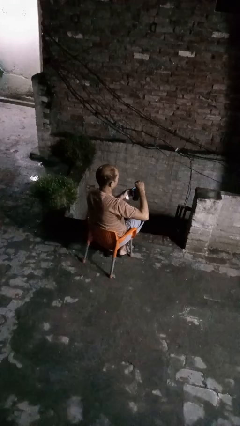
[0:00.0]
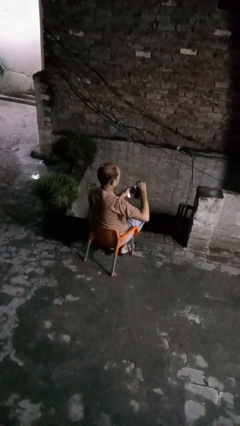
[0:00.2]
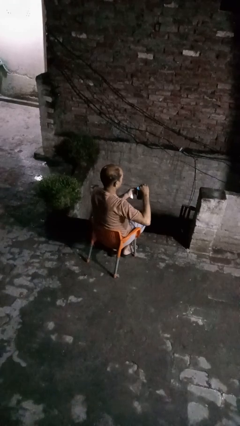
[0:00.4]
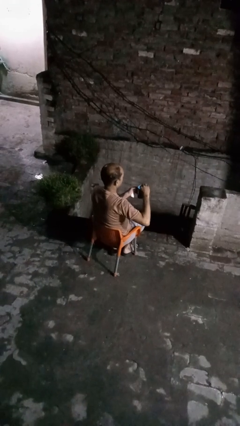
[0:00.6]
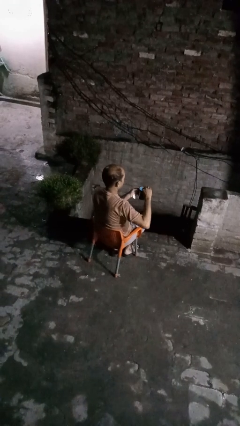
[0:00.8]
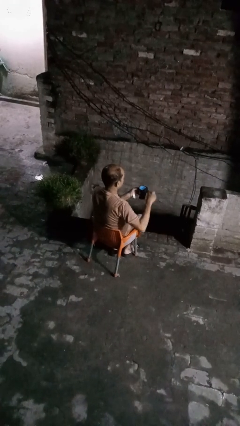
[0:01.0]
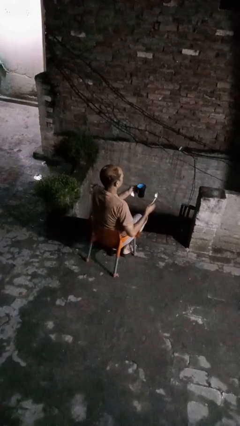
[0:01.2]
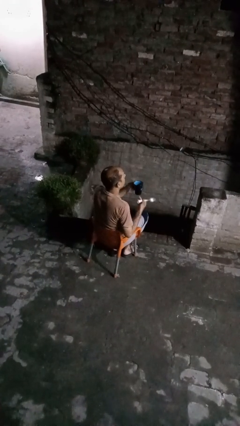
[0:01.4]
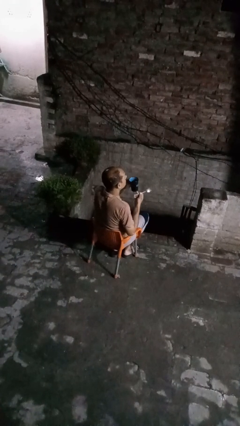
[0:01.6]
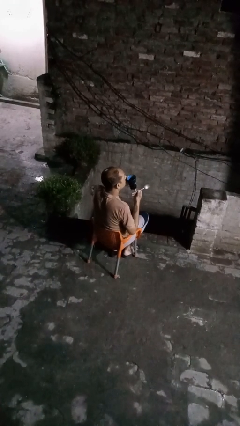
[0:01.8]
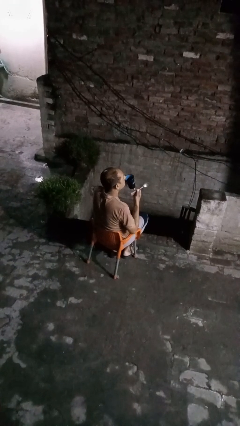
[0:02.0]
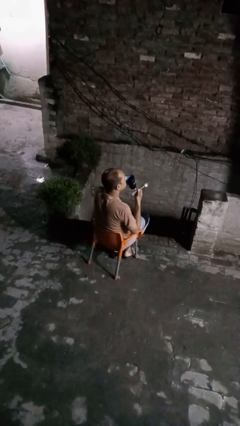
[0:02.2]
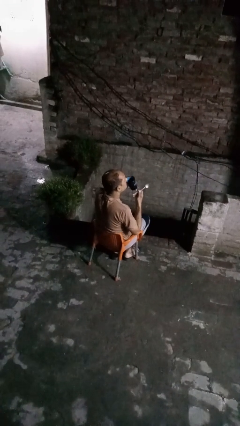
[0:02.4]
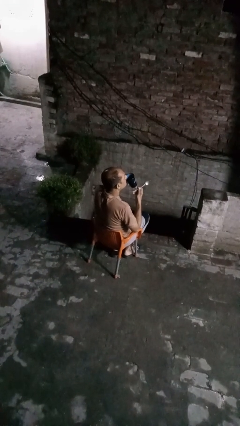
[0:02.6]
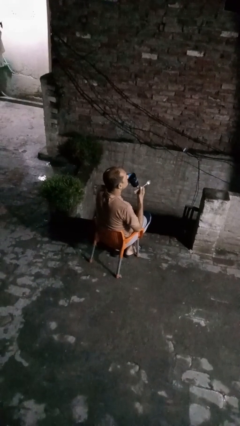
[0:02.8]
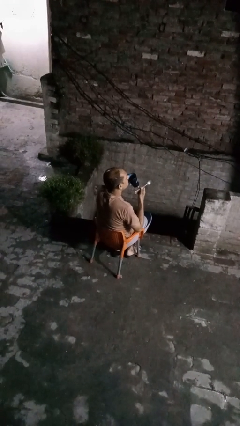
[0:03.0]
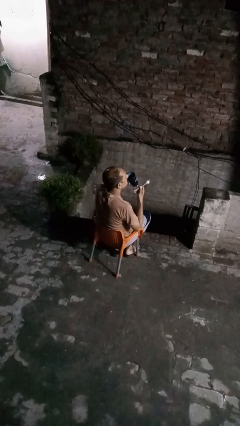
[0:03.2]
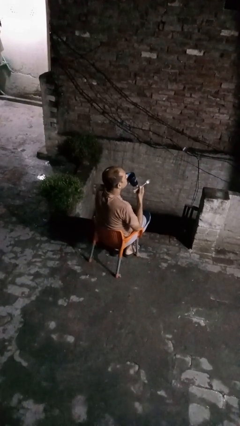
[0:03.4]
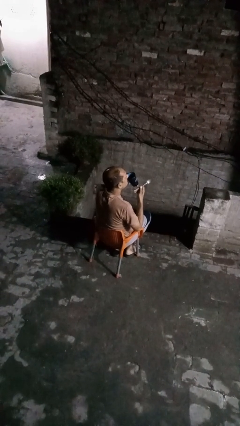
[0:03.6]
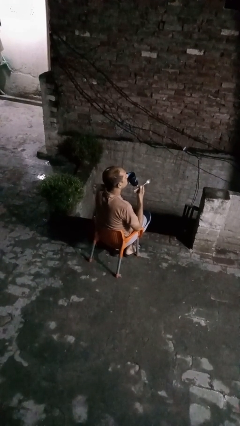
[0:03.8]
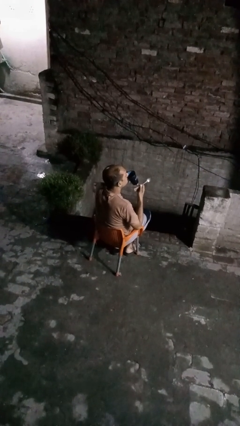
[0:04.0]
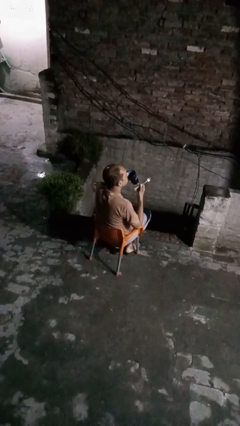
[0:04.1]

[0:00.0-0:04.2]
person drinks from mug

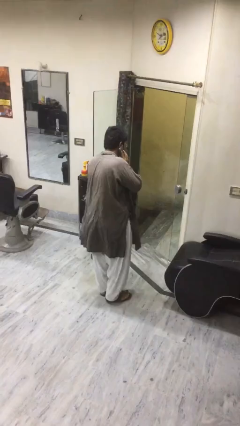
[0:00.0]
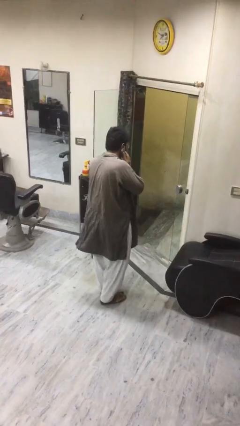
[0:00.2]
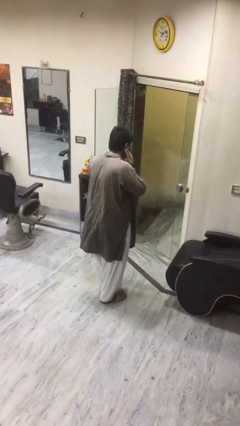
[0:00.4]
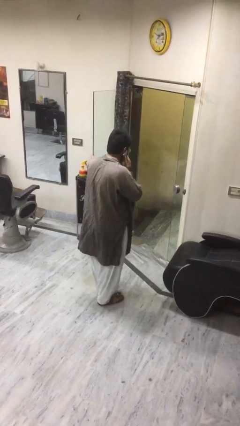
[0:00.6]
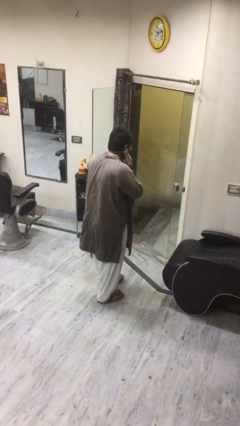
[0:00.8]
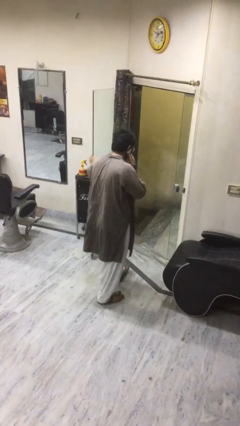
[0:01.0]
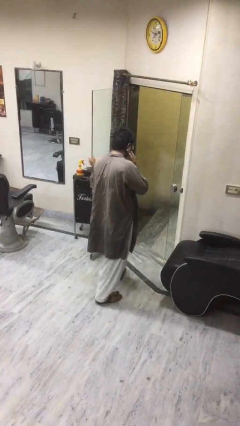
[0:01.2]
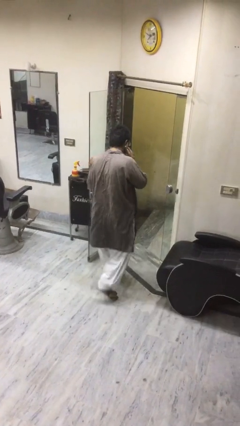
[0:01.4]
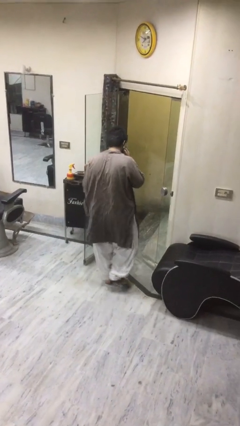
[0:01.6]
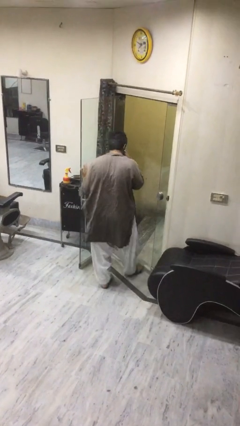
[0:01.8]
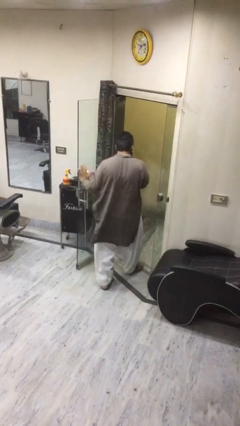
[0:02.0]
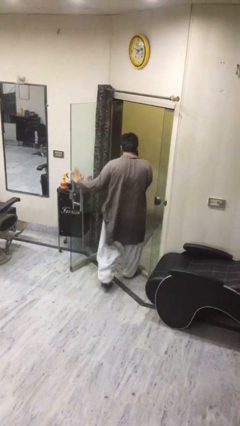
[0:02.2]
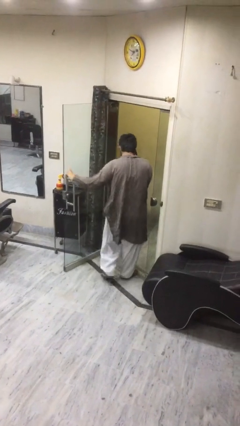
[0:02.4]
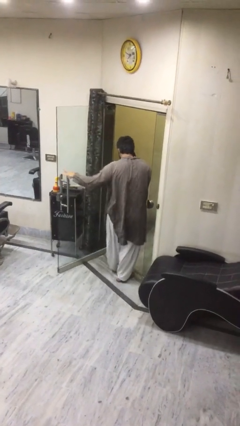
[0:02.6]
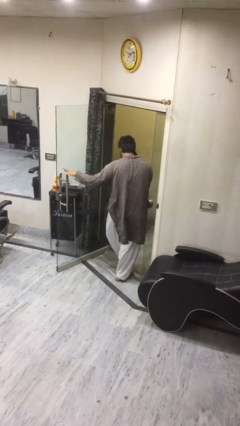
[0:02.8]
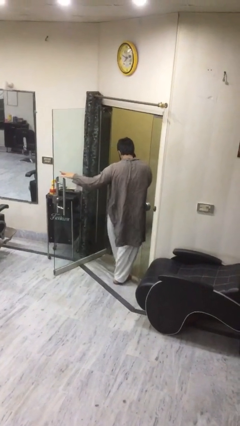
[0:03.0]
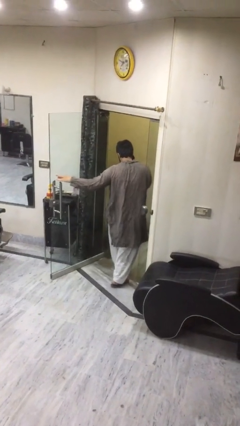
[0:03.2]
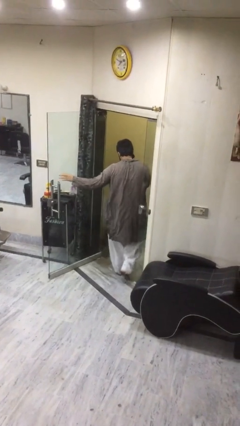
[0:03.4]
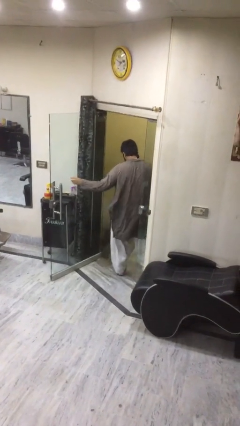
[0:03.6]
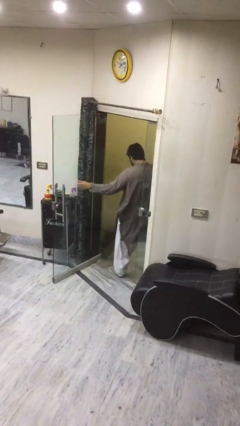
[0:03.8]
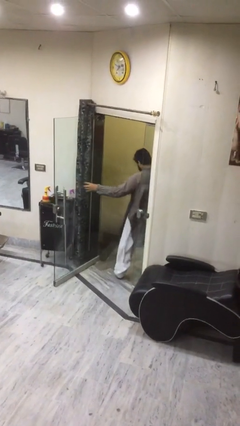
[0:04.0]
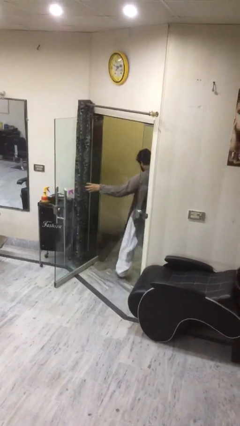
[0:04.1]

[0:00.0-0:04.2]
person exits scene through structure

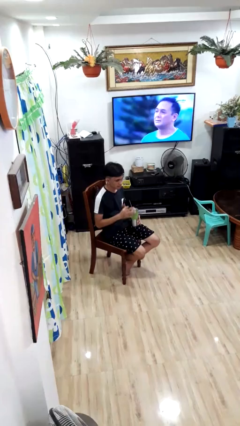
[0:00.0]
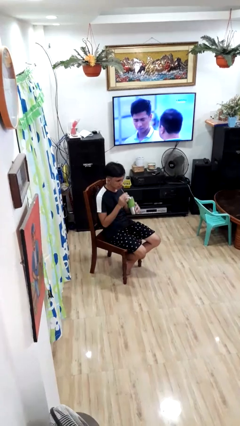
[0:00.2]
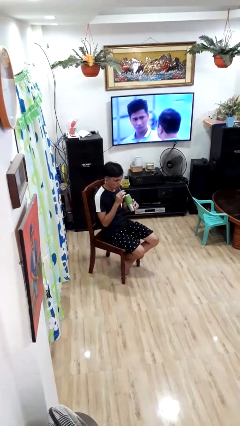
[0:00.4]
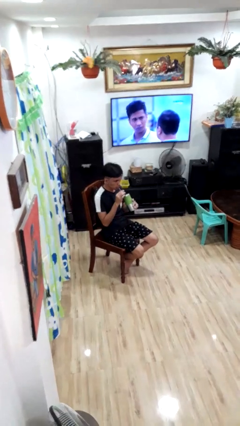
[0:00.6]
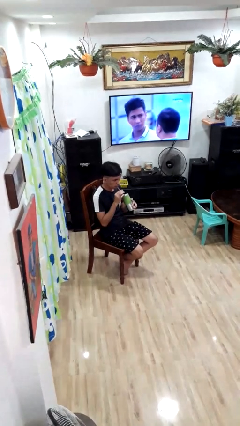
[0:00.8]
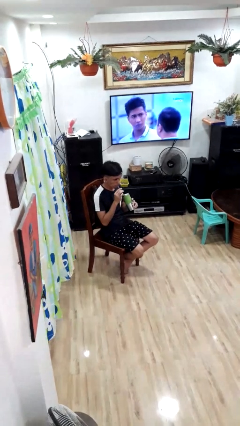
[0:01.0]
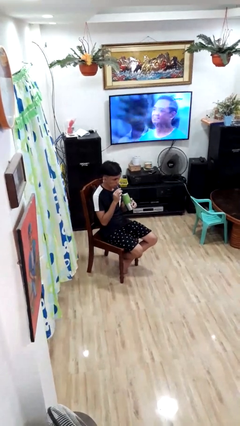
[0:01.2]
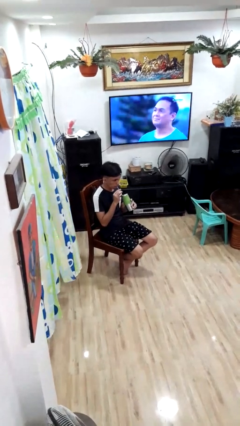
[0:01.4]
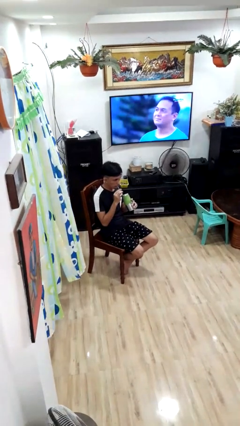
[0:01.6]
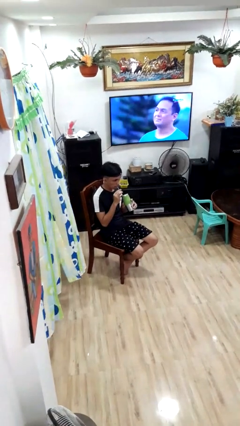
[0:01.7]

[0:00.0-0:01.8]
person wipes mouth with napkin

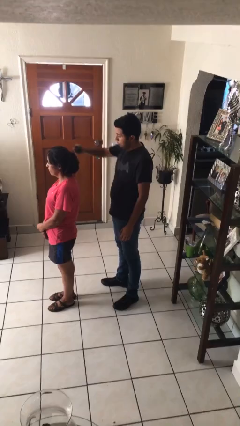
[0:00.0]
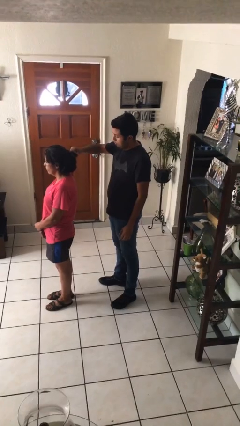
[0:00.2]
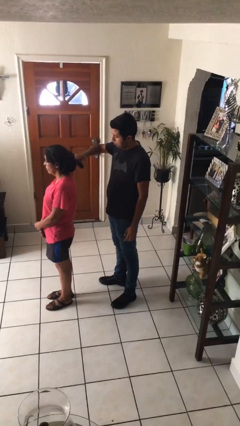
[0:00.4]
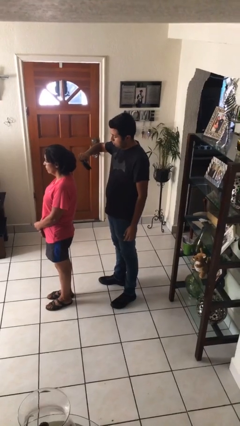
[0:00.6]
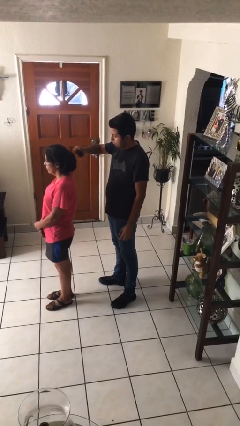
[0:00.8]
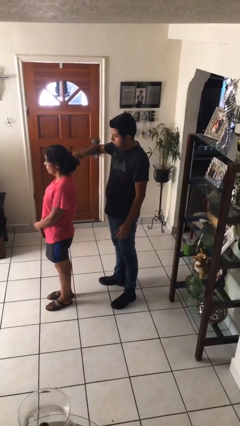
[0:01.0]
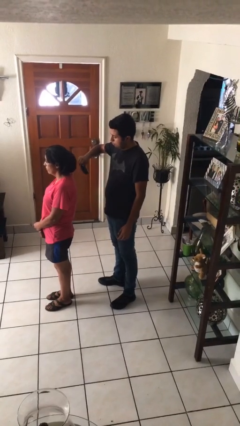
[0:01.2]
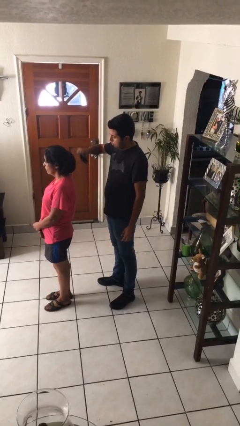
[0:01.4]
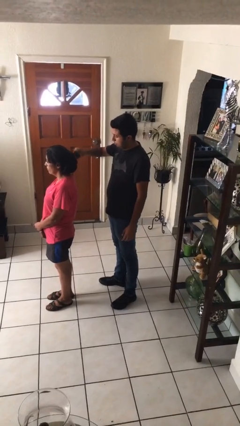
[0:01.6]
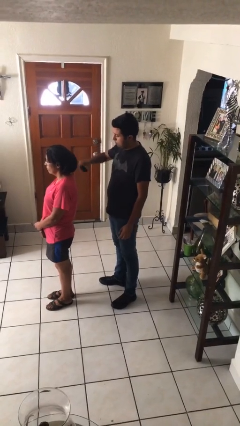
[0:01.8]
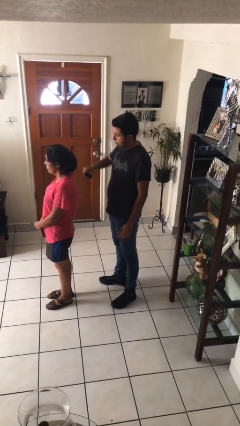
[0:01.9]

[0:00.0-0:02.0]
person brushes hair of person

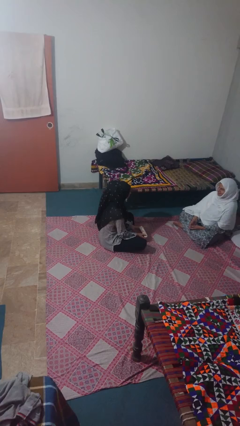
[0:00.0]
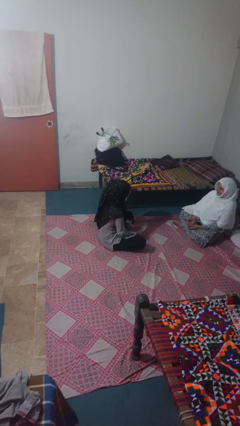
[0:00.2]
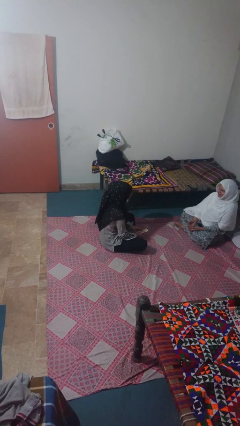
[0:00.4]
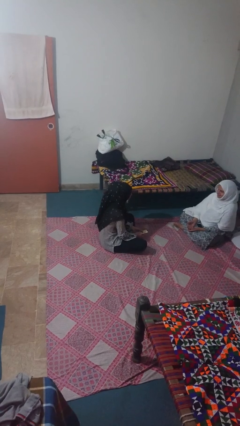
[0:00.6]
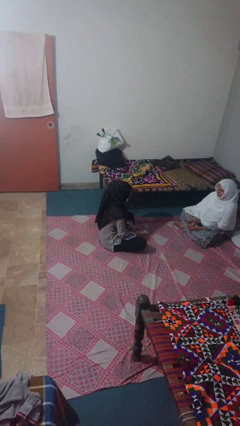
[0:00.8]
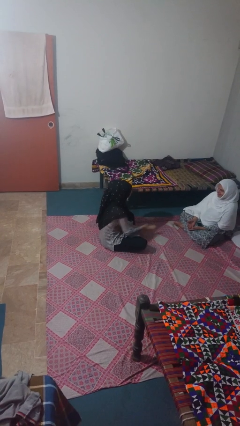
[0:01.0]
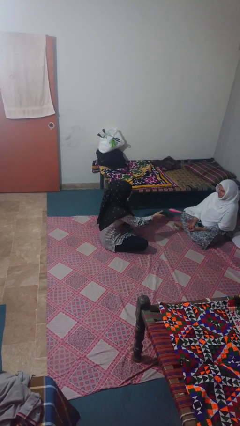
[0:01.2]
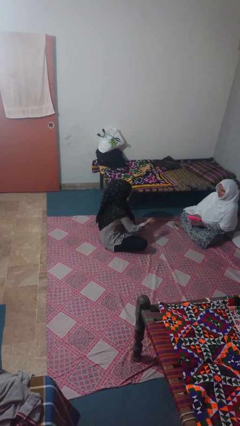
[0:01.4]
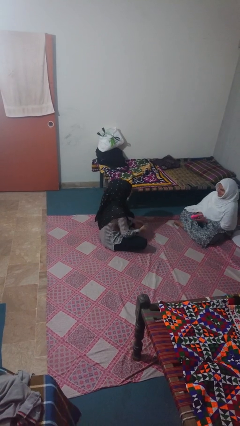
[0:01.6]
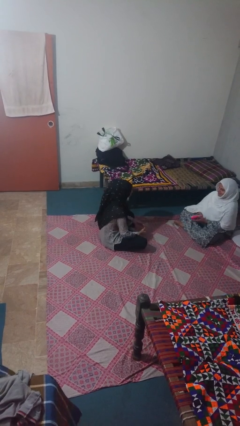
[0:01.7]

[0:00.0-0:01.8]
person throws object to person

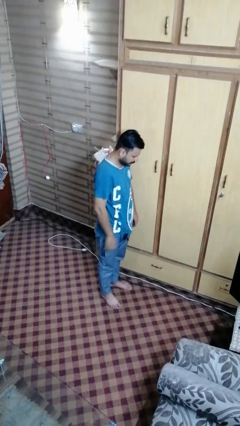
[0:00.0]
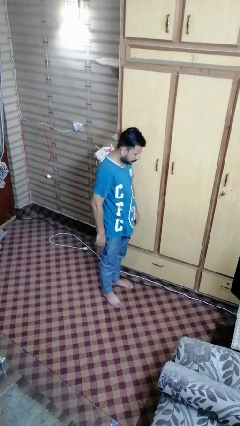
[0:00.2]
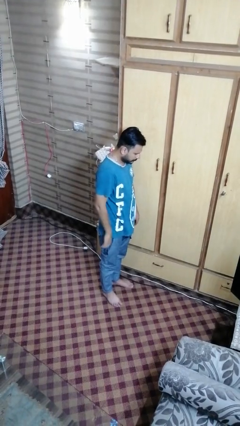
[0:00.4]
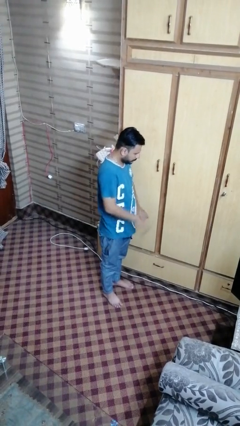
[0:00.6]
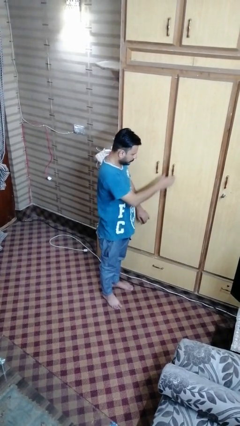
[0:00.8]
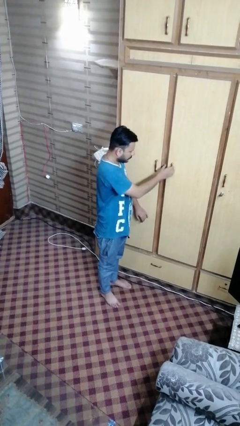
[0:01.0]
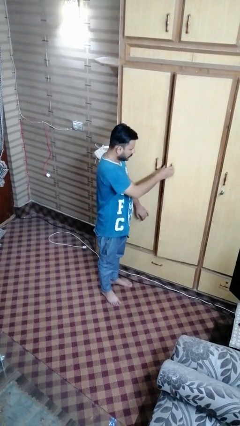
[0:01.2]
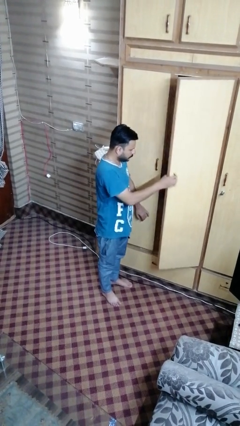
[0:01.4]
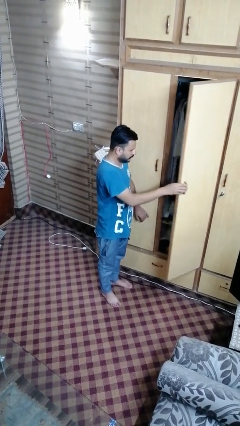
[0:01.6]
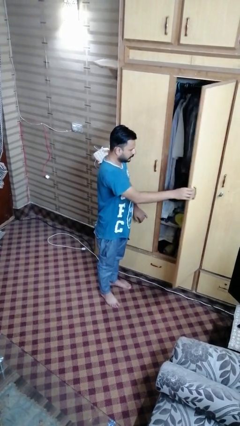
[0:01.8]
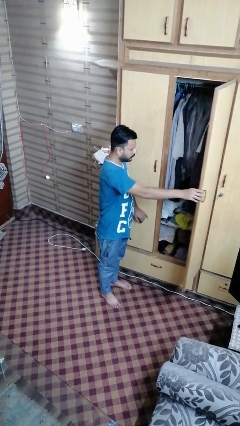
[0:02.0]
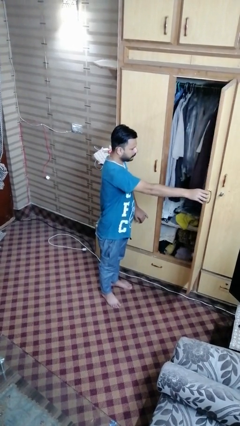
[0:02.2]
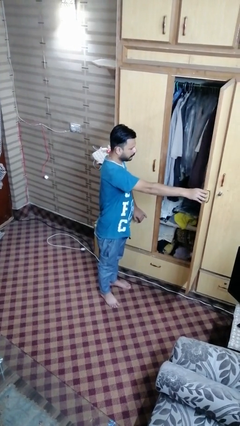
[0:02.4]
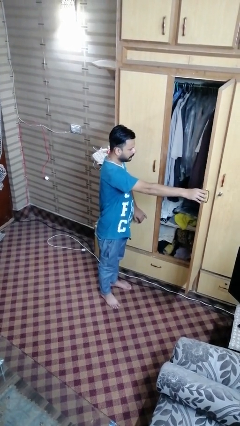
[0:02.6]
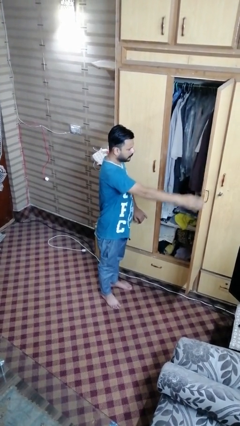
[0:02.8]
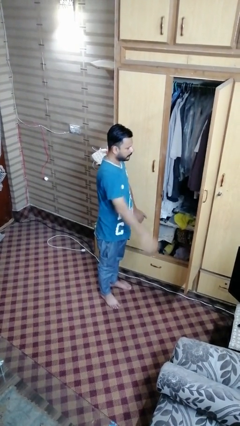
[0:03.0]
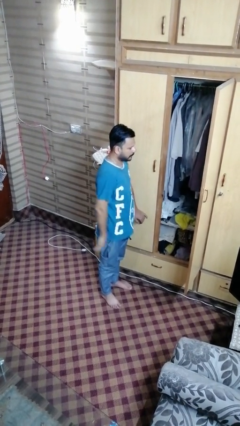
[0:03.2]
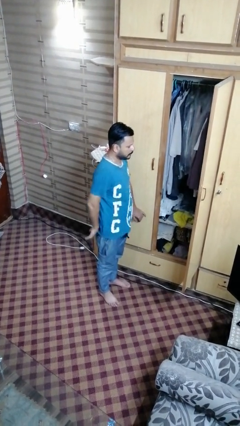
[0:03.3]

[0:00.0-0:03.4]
person opens closet door
